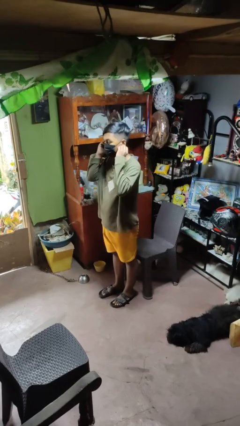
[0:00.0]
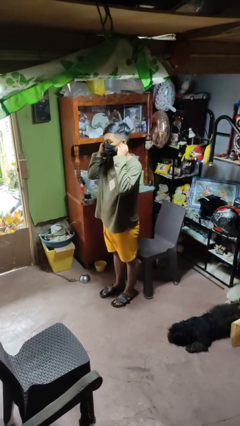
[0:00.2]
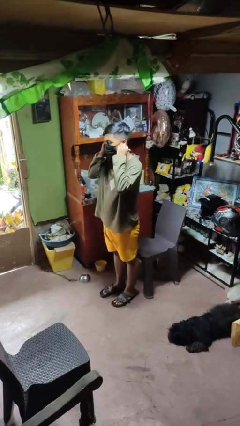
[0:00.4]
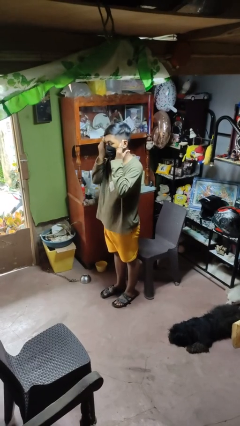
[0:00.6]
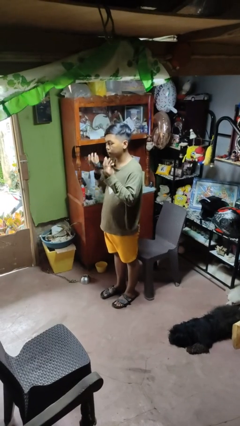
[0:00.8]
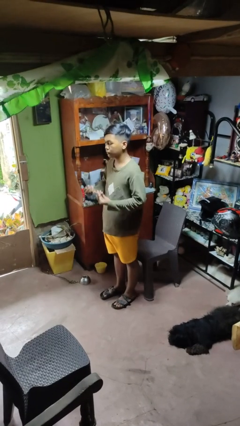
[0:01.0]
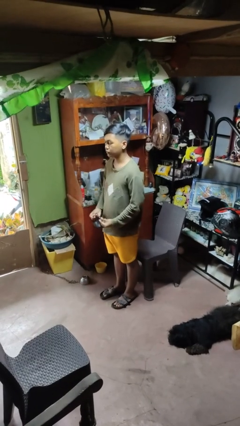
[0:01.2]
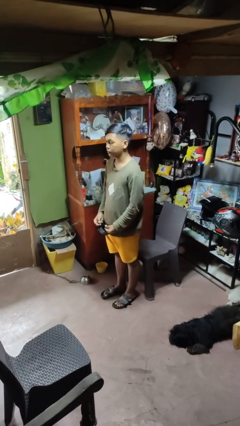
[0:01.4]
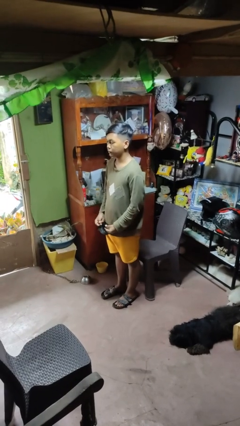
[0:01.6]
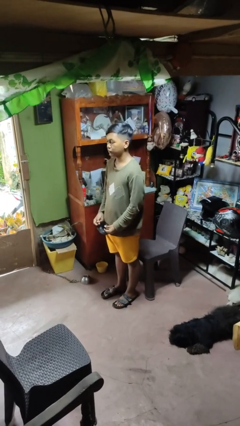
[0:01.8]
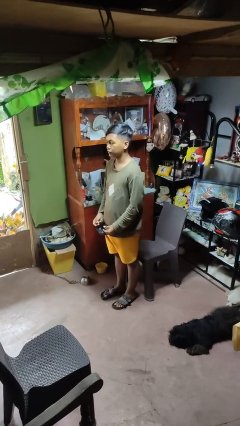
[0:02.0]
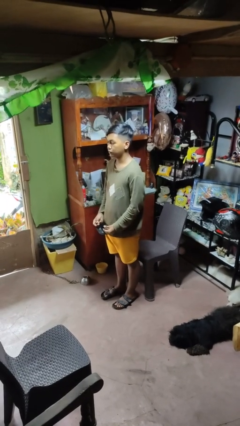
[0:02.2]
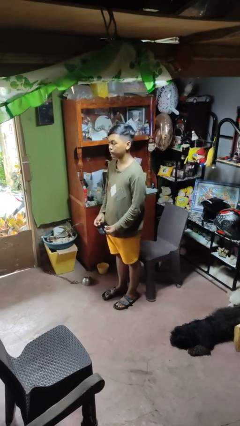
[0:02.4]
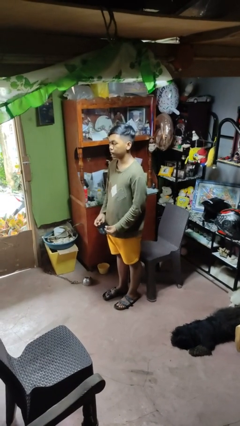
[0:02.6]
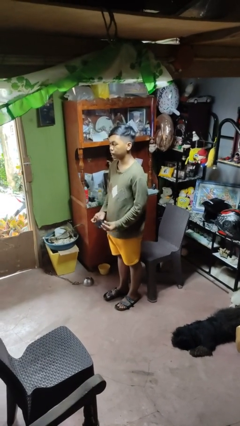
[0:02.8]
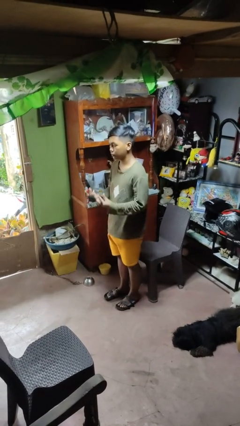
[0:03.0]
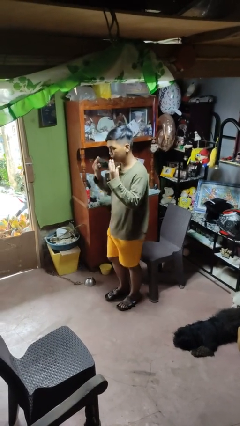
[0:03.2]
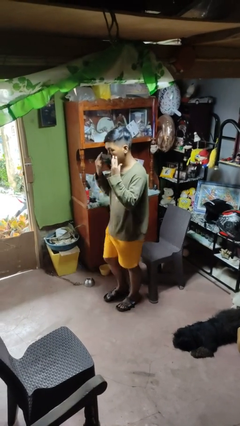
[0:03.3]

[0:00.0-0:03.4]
person takes off facemask

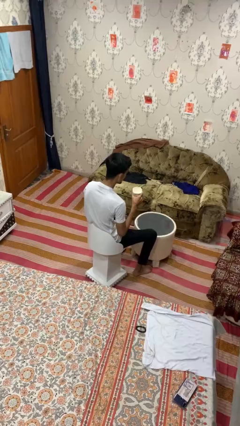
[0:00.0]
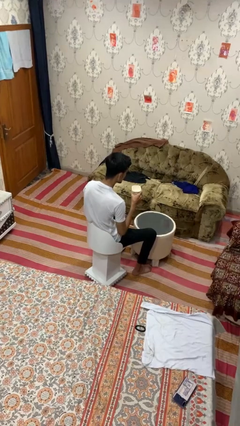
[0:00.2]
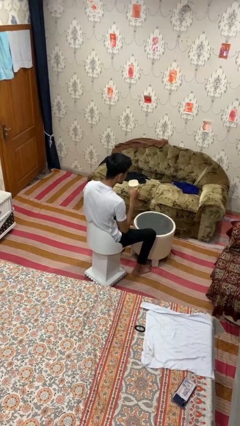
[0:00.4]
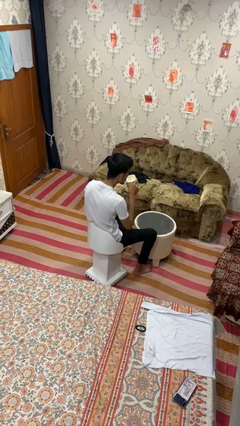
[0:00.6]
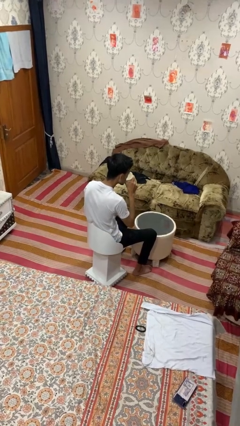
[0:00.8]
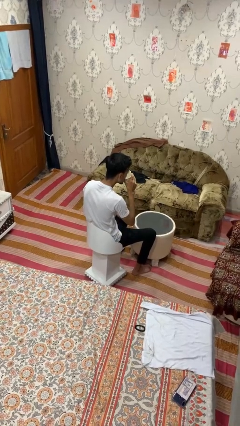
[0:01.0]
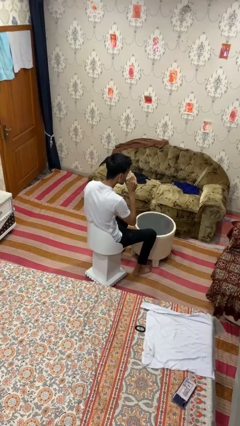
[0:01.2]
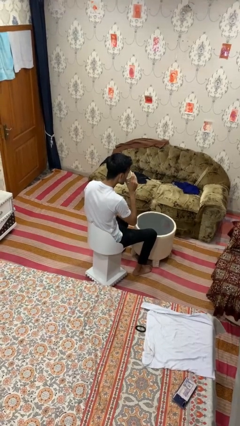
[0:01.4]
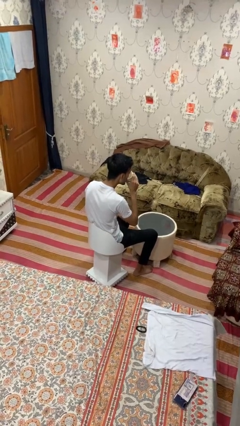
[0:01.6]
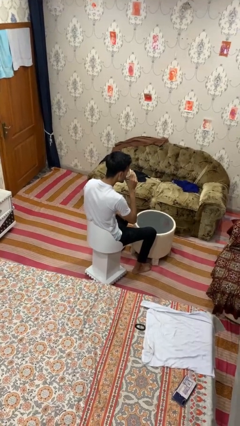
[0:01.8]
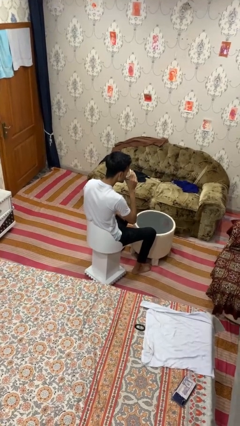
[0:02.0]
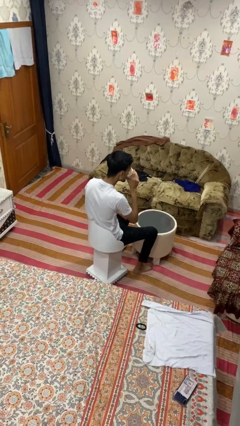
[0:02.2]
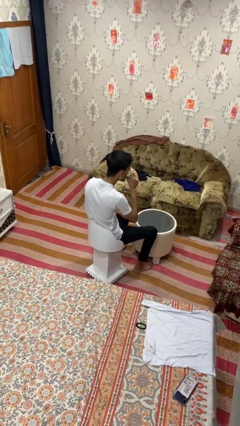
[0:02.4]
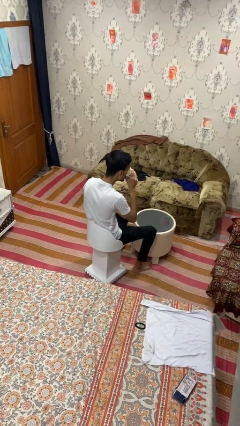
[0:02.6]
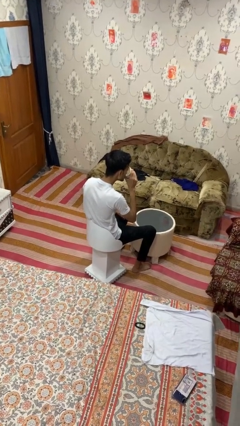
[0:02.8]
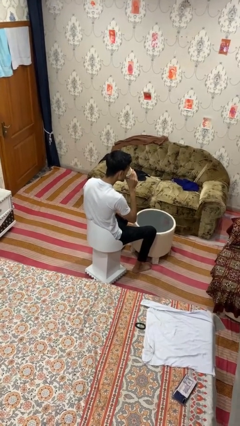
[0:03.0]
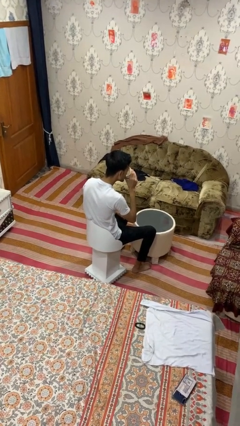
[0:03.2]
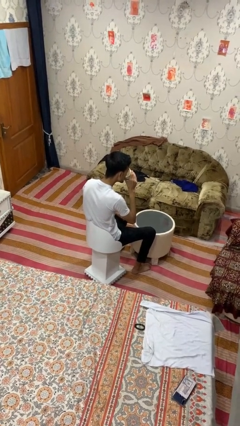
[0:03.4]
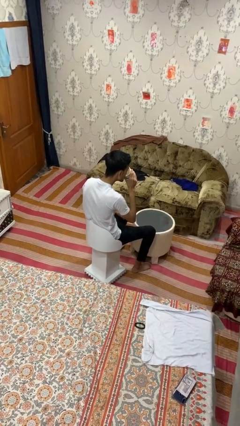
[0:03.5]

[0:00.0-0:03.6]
person drinks from mug

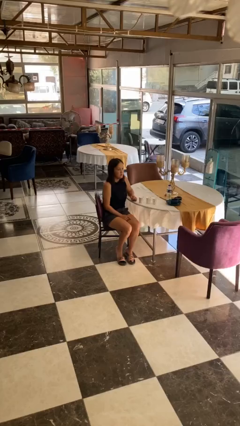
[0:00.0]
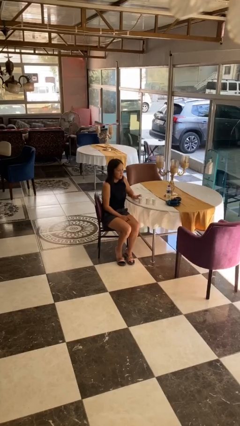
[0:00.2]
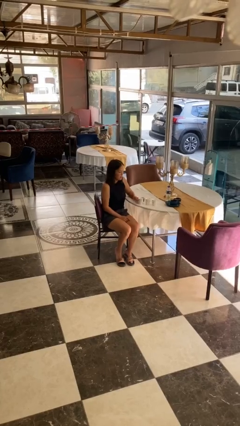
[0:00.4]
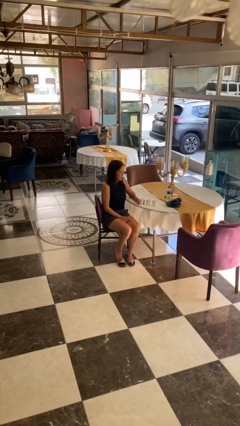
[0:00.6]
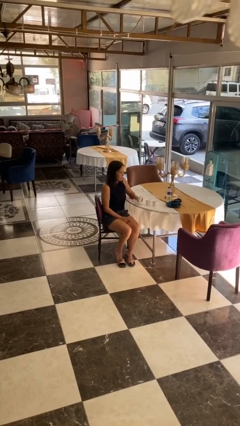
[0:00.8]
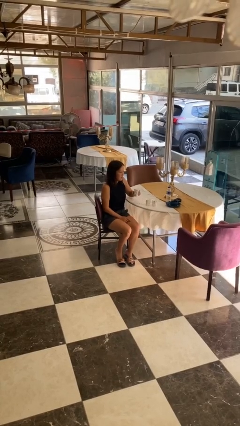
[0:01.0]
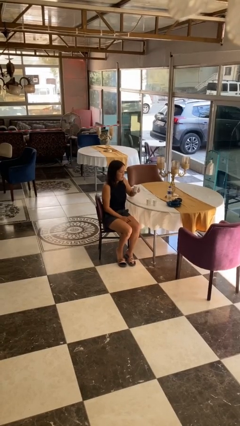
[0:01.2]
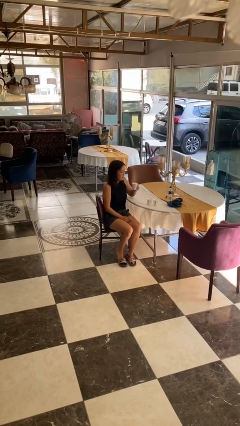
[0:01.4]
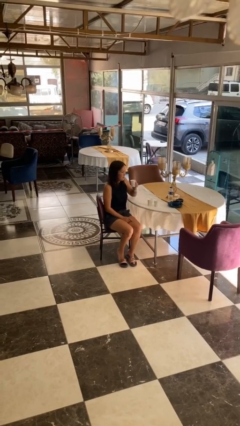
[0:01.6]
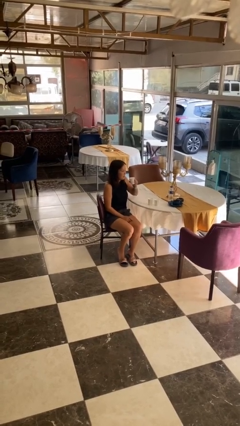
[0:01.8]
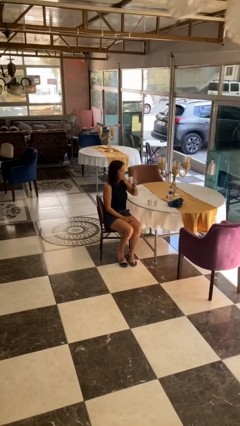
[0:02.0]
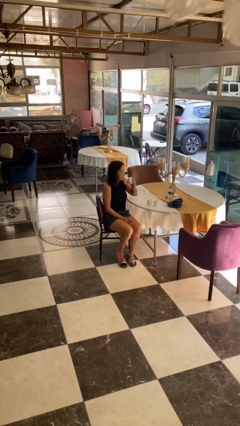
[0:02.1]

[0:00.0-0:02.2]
person picks up object from table

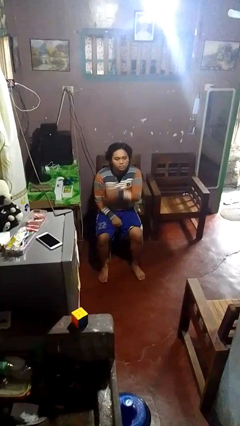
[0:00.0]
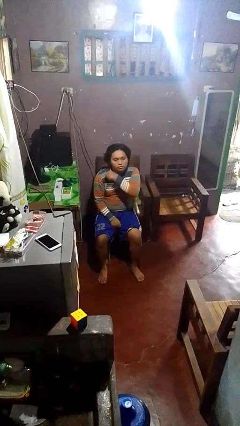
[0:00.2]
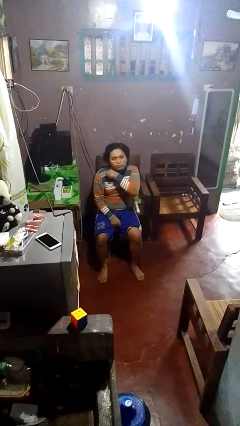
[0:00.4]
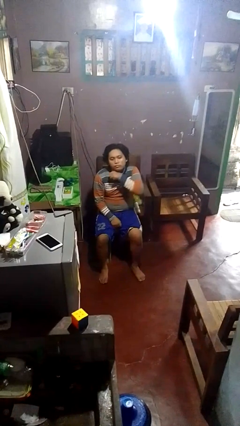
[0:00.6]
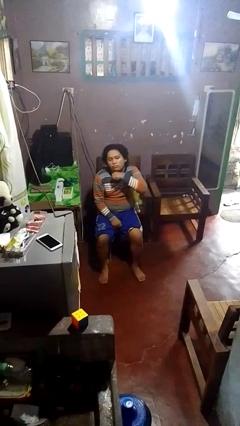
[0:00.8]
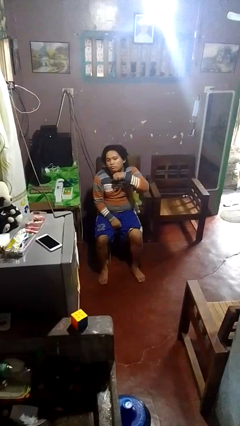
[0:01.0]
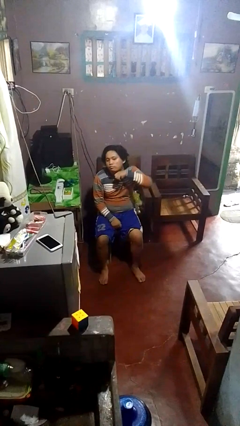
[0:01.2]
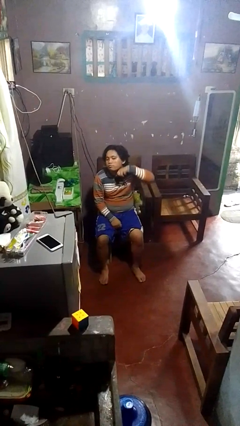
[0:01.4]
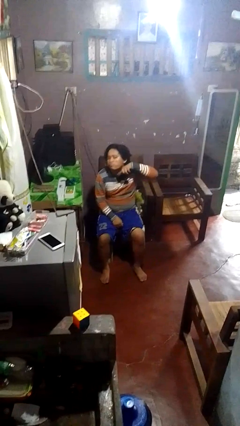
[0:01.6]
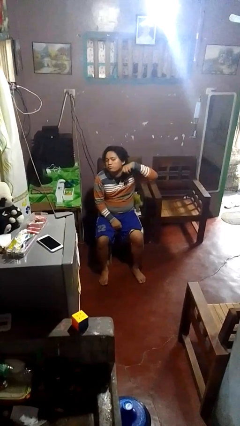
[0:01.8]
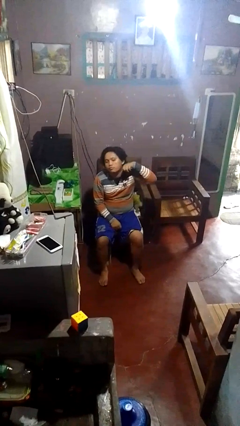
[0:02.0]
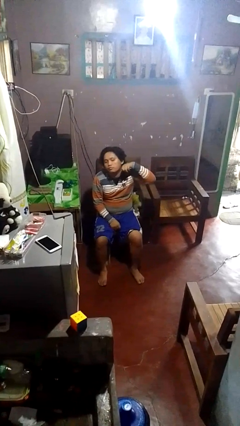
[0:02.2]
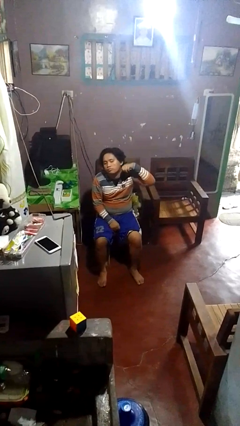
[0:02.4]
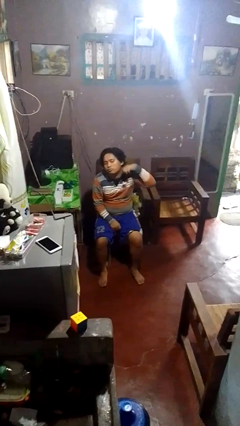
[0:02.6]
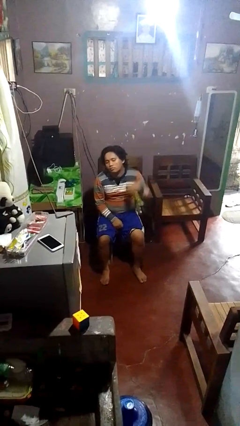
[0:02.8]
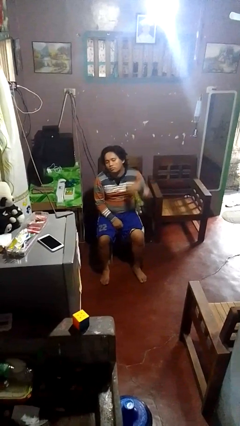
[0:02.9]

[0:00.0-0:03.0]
person gestures cut

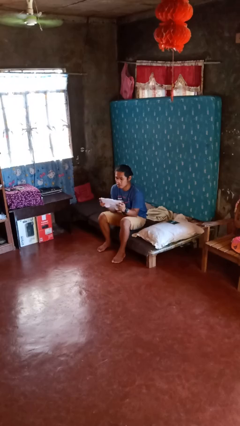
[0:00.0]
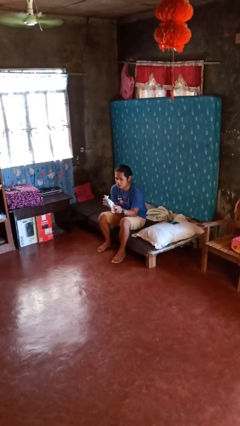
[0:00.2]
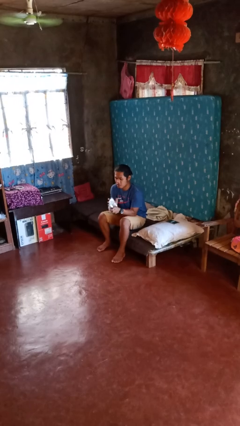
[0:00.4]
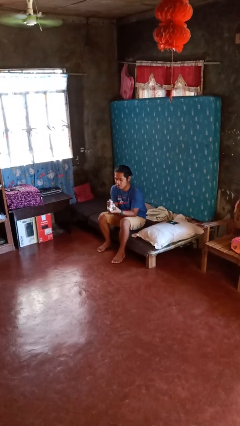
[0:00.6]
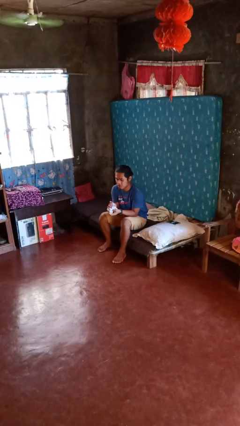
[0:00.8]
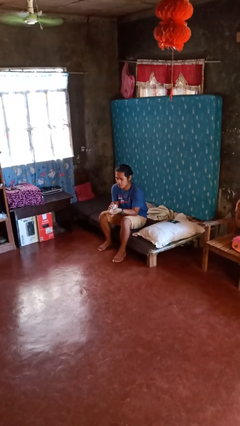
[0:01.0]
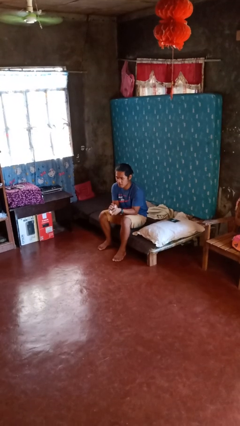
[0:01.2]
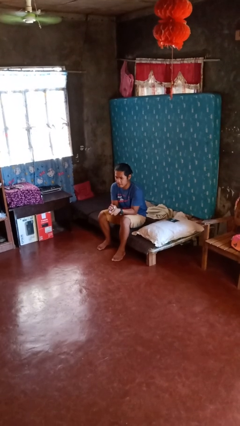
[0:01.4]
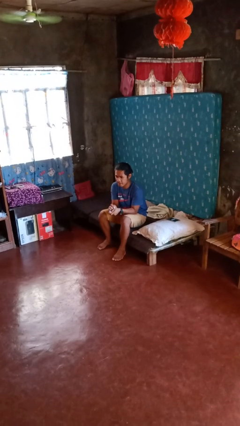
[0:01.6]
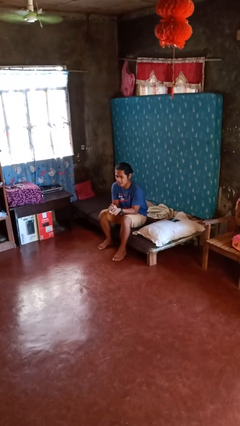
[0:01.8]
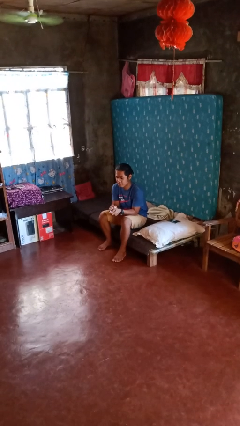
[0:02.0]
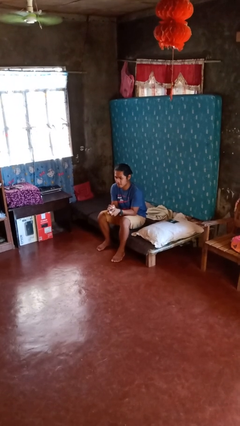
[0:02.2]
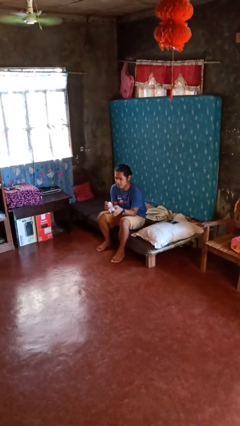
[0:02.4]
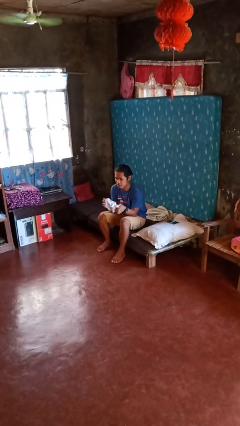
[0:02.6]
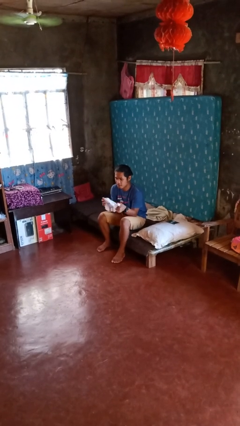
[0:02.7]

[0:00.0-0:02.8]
person crumples paper

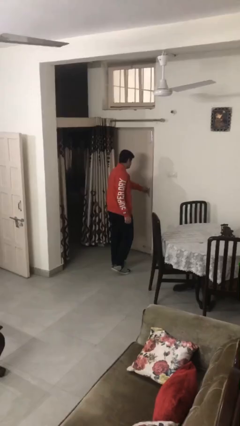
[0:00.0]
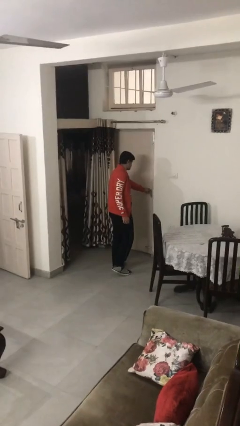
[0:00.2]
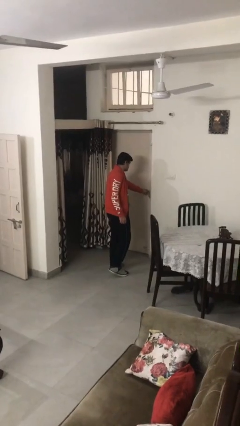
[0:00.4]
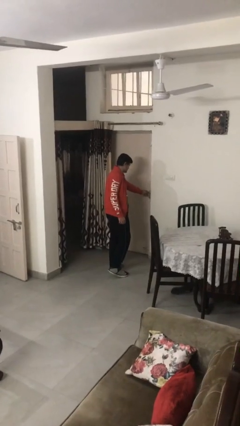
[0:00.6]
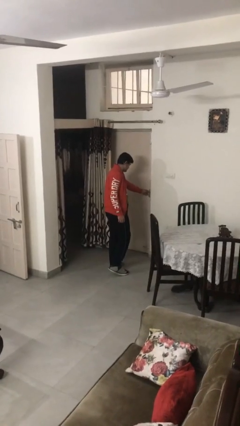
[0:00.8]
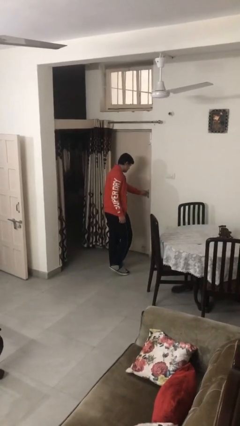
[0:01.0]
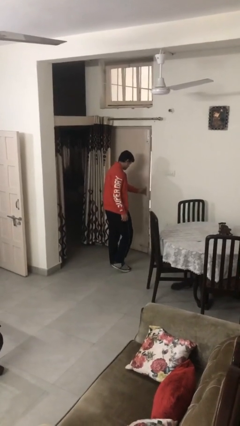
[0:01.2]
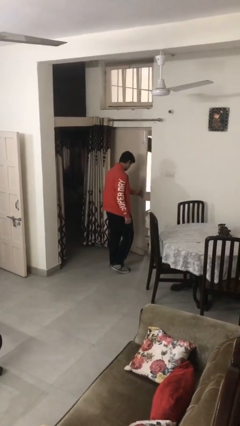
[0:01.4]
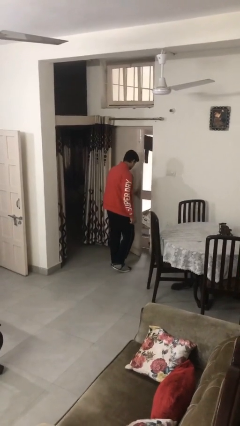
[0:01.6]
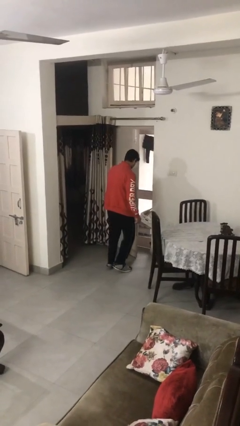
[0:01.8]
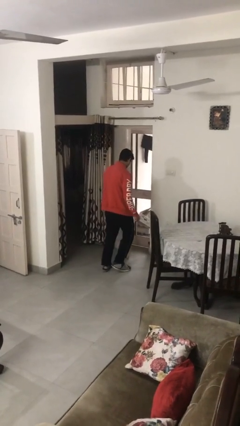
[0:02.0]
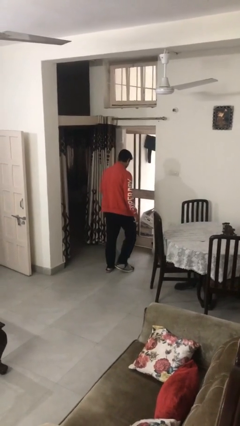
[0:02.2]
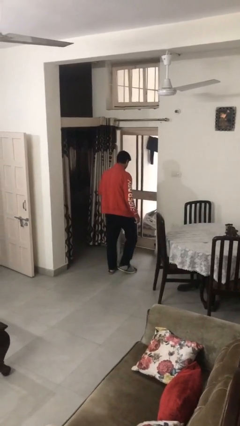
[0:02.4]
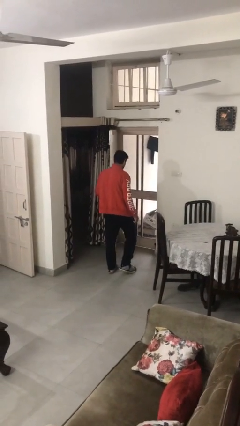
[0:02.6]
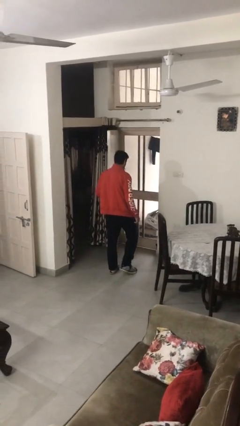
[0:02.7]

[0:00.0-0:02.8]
person opens facility door
